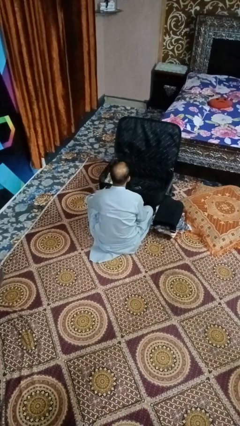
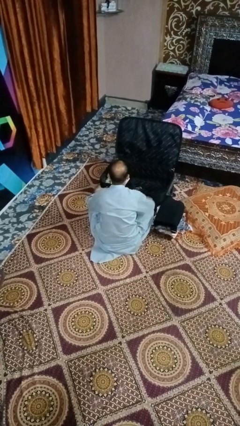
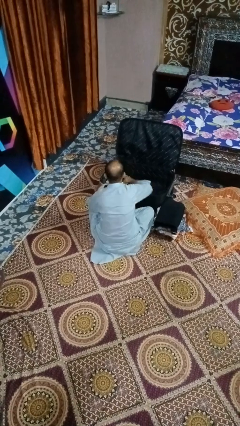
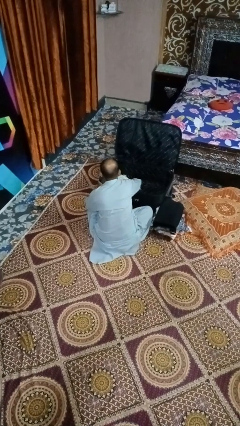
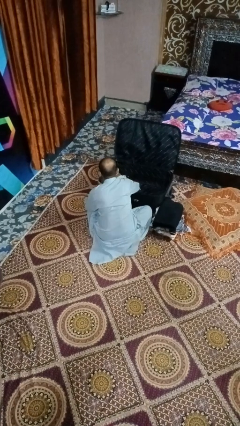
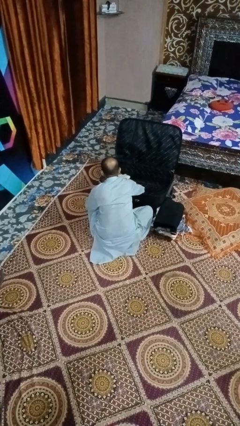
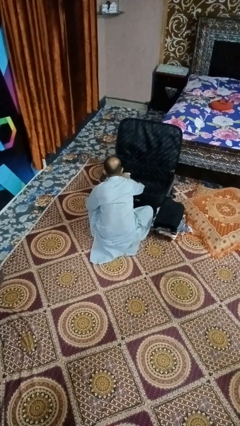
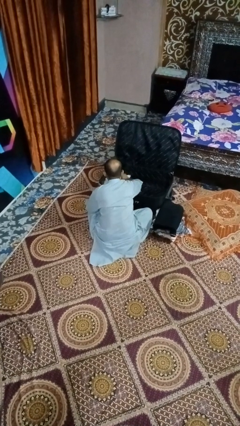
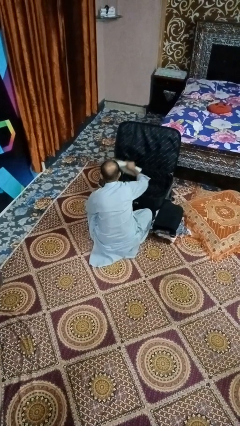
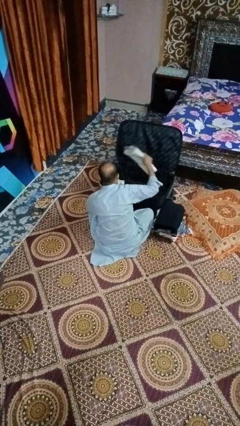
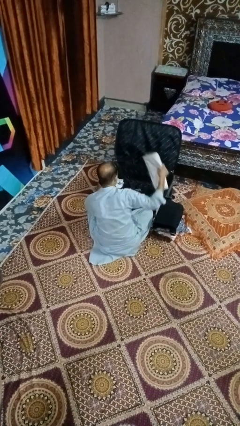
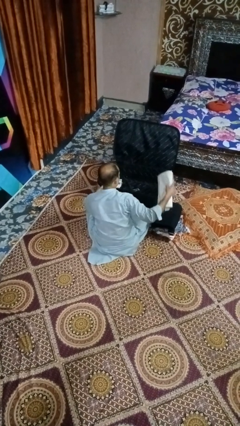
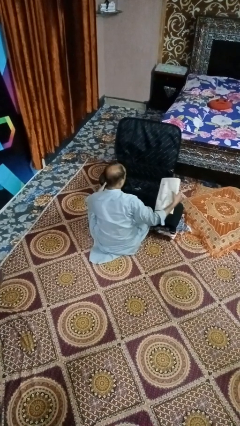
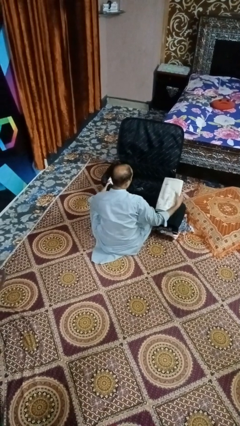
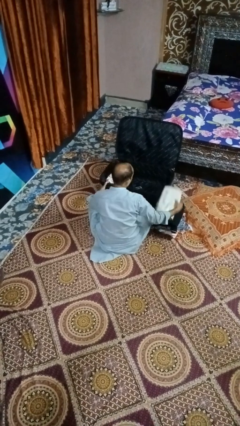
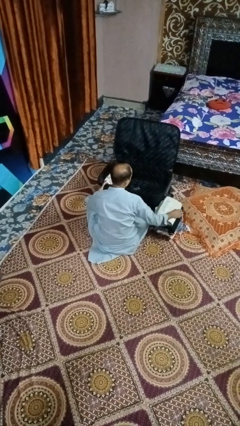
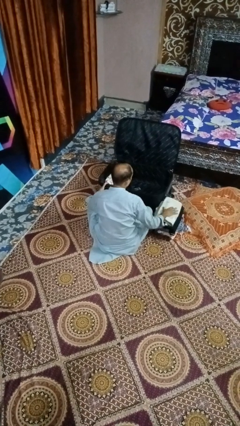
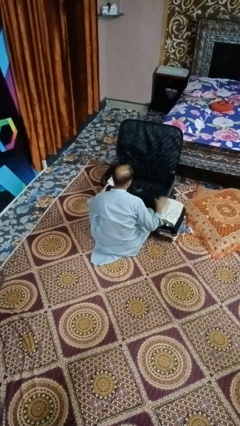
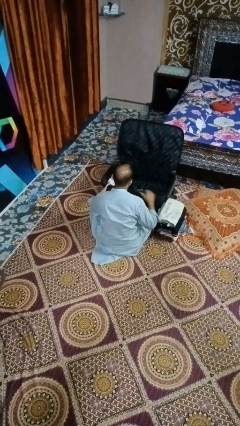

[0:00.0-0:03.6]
person unloads clothes from suitcase

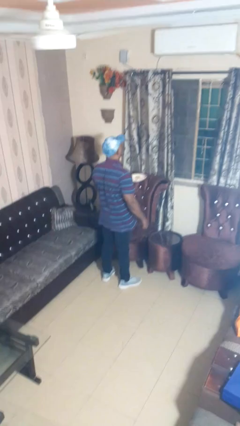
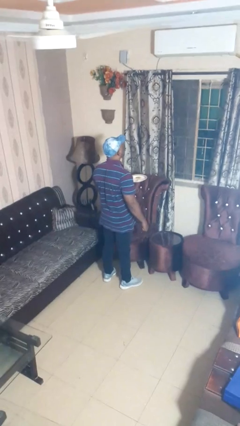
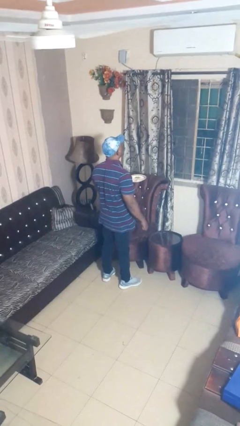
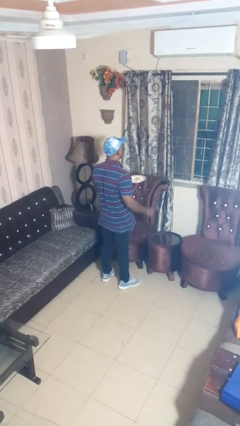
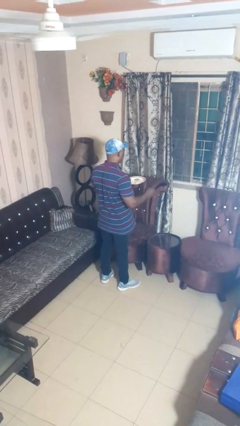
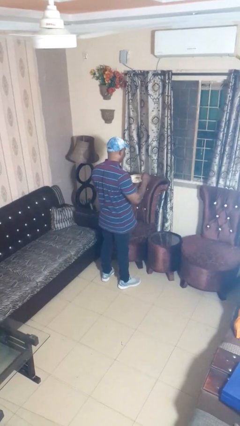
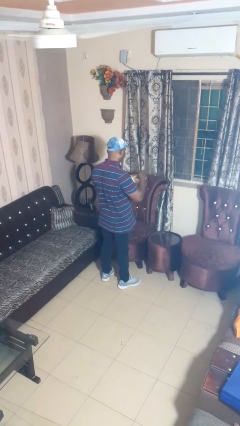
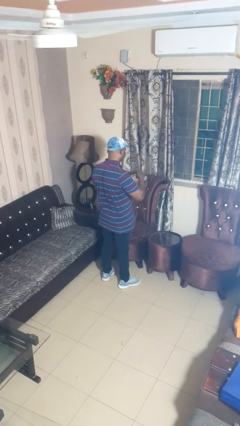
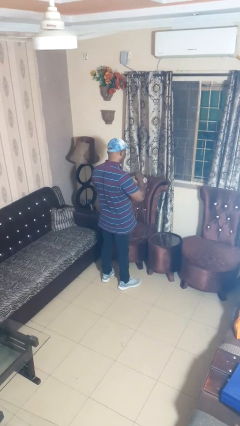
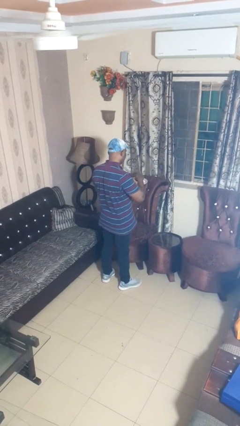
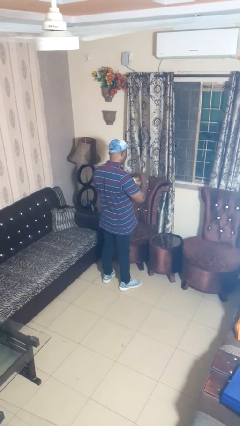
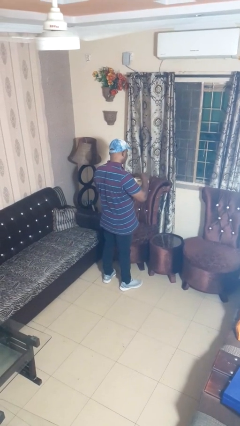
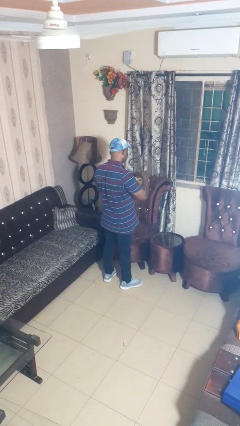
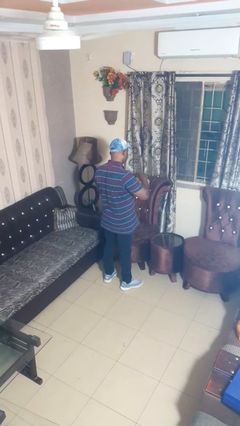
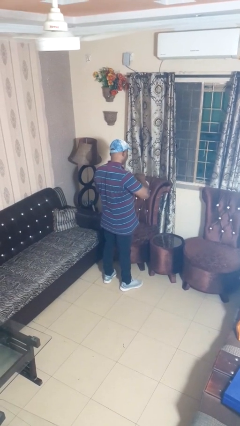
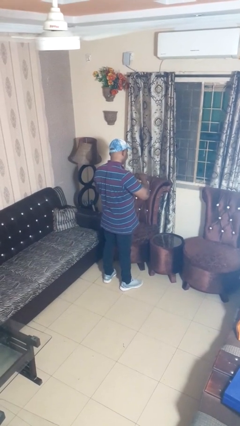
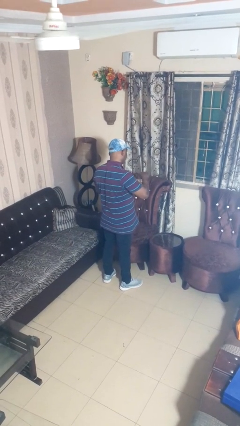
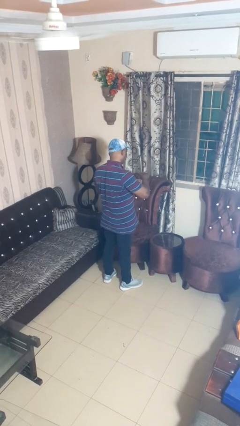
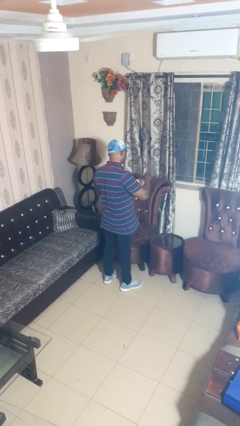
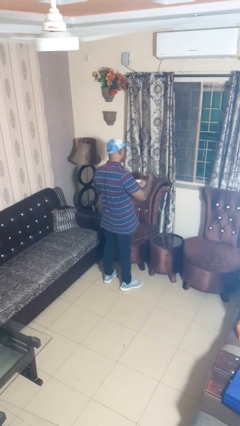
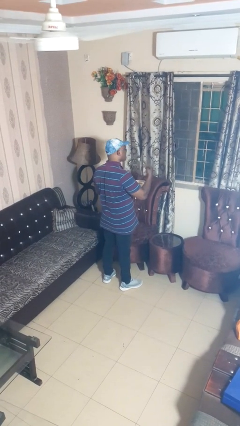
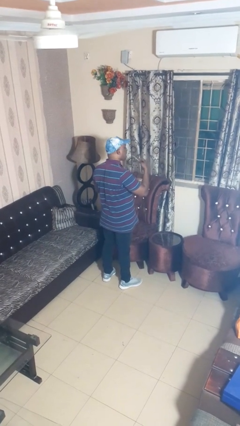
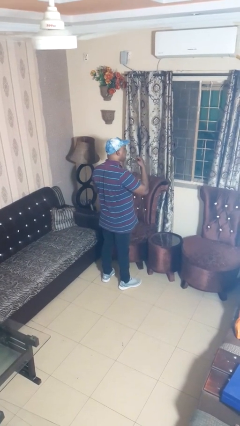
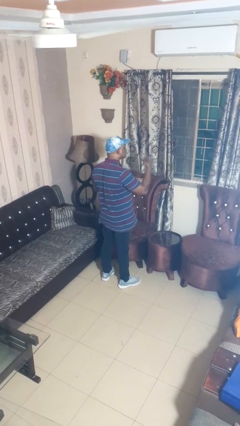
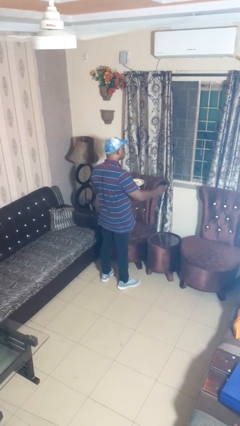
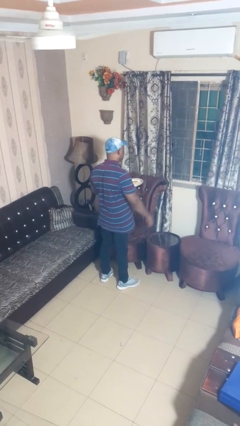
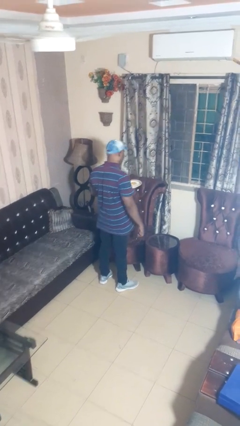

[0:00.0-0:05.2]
person eats with utensil

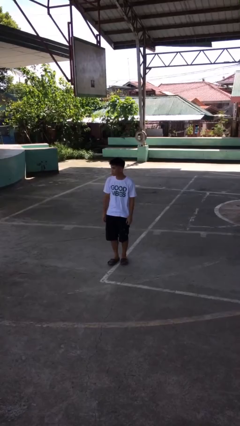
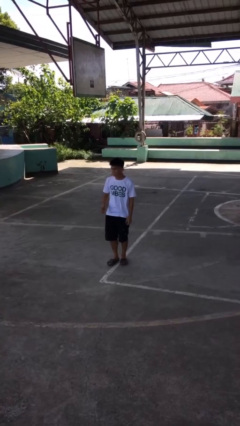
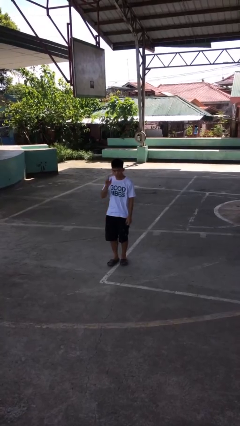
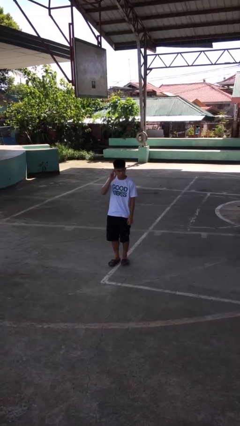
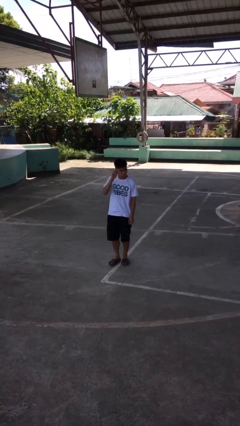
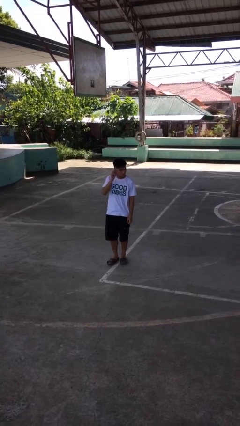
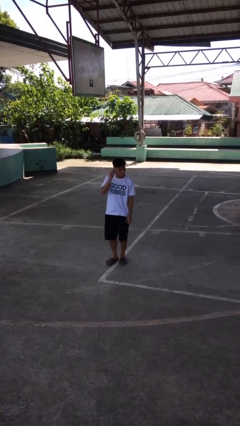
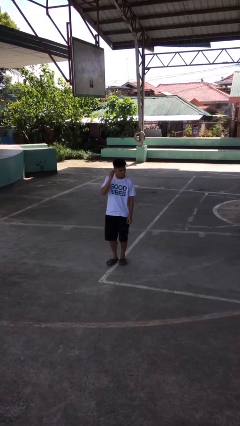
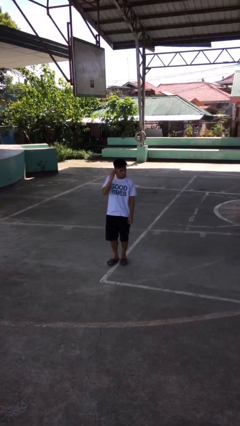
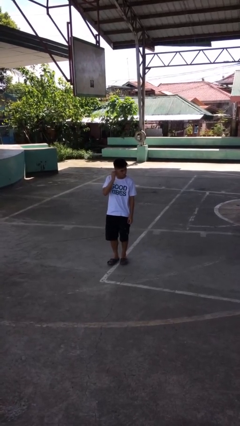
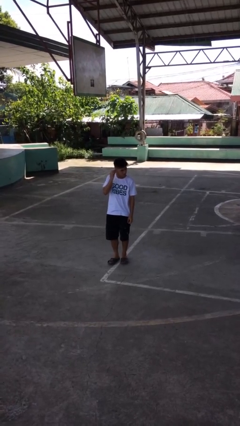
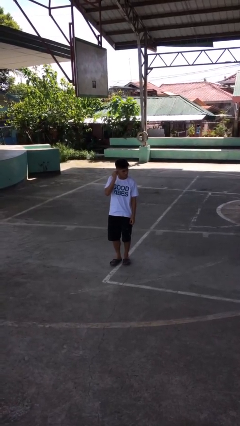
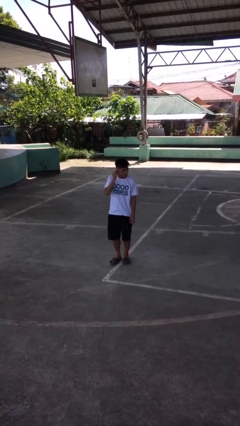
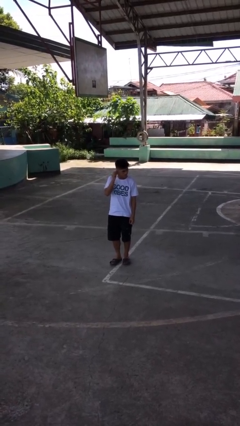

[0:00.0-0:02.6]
person touches earlobe

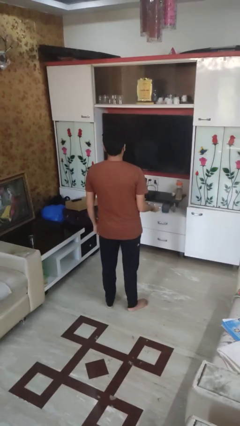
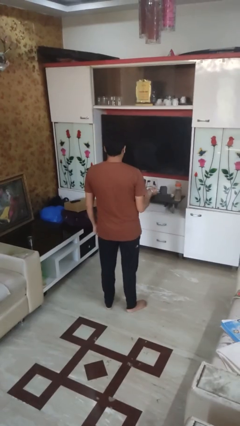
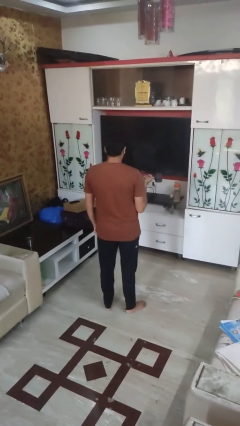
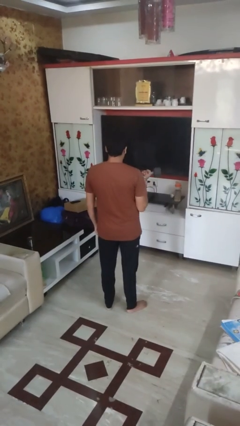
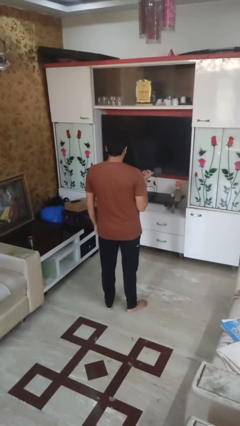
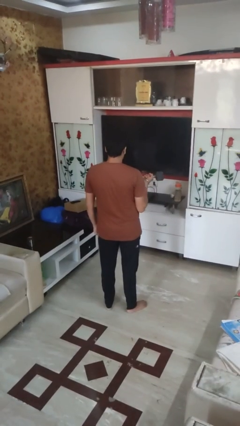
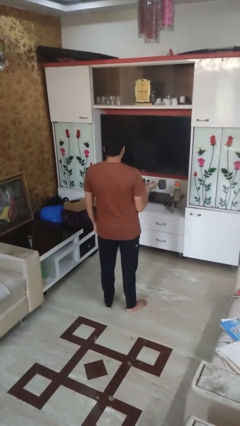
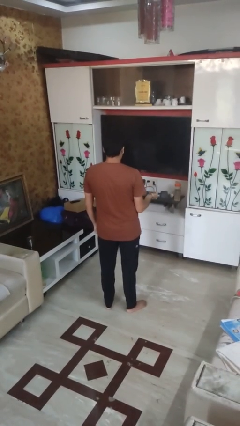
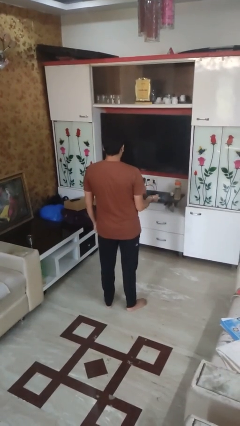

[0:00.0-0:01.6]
person lifts dumbbells

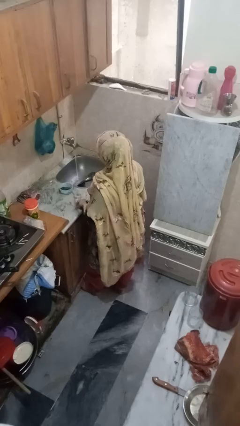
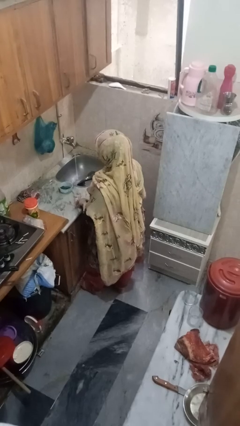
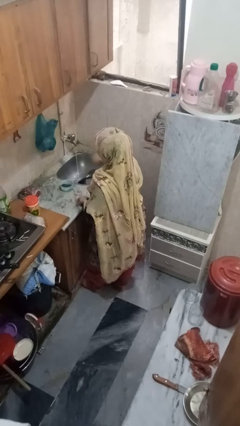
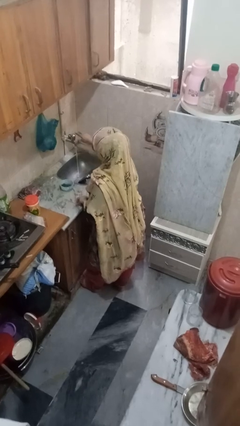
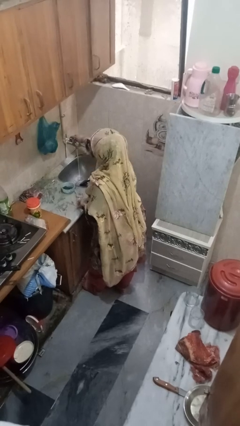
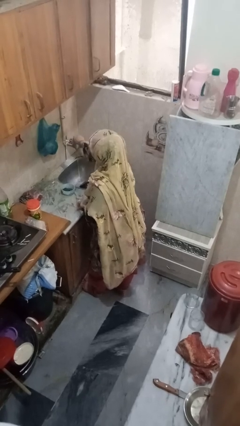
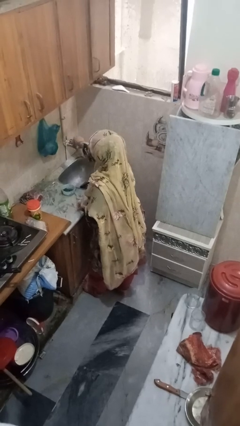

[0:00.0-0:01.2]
person turns off faucet

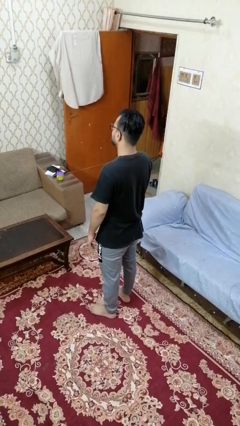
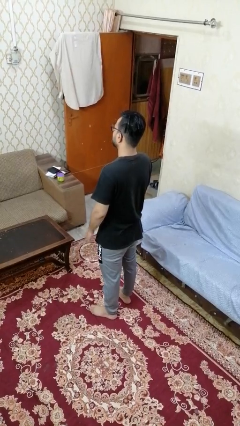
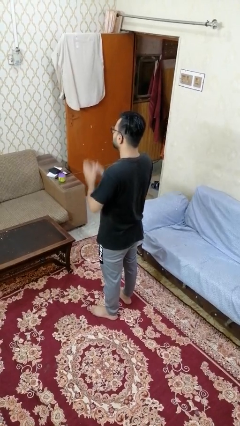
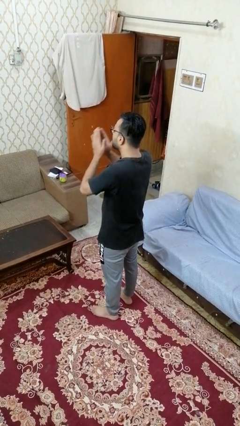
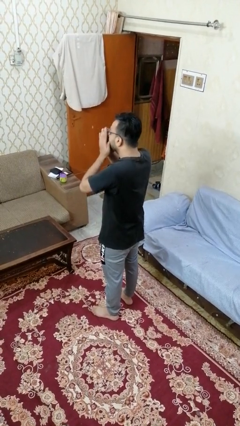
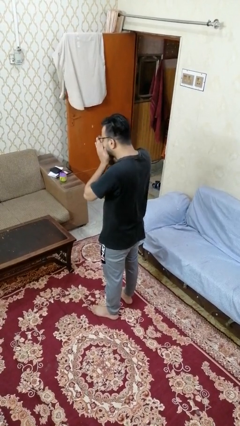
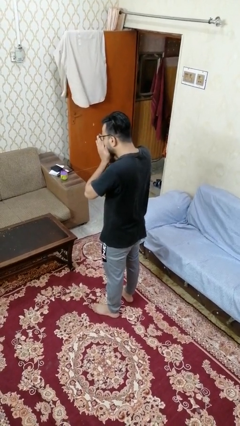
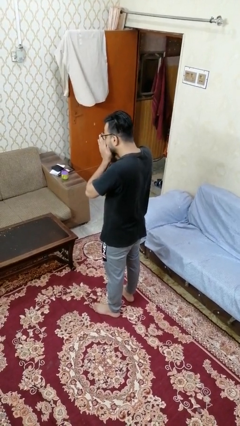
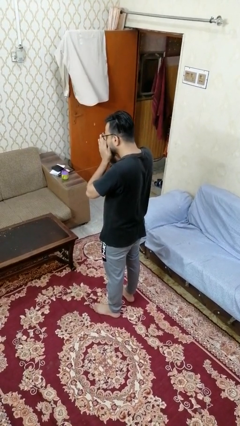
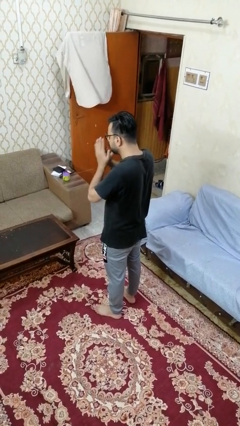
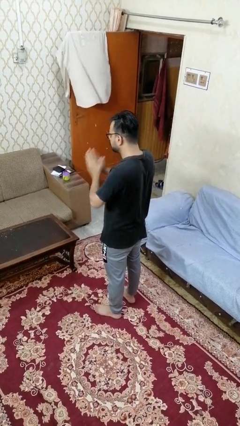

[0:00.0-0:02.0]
person sneezes into hand

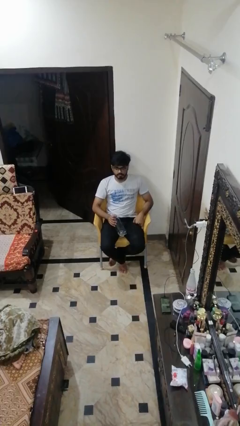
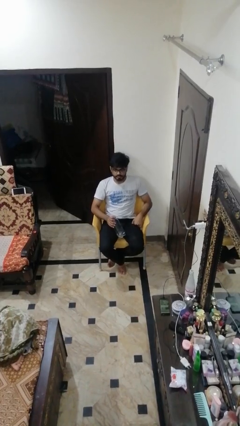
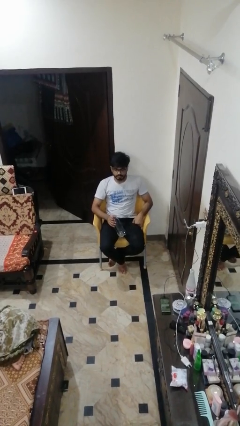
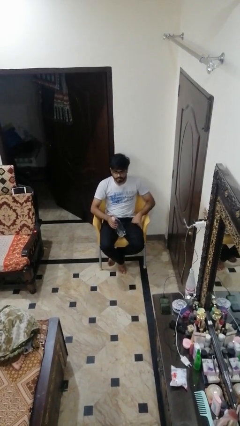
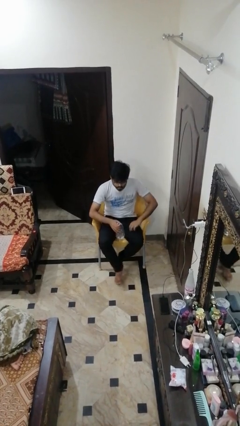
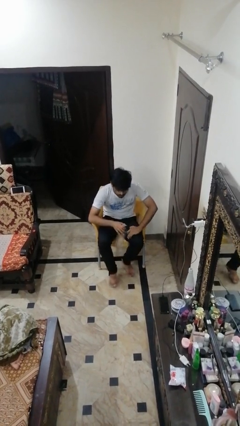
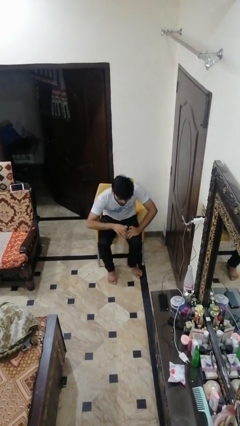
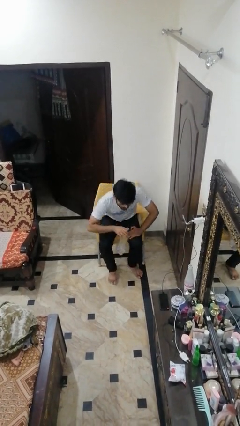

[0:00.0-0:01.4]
person picks up object from floor
